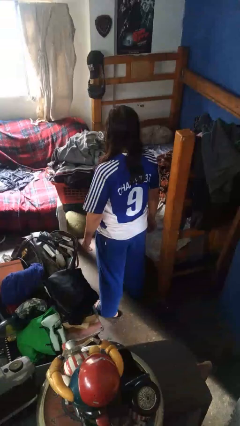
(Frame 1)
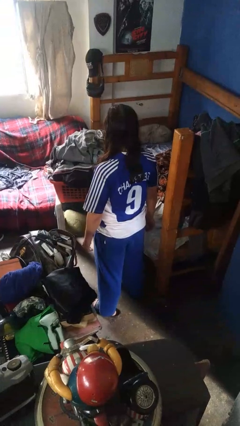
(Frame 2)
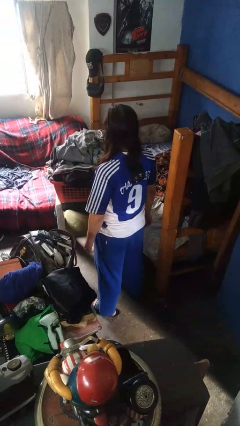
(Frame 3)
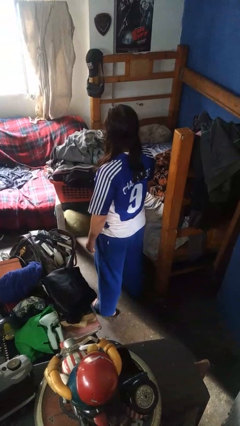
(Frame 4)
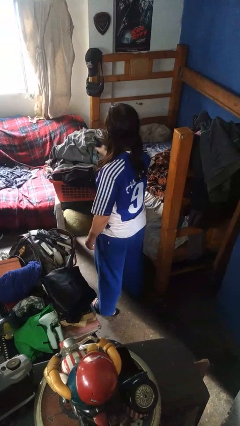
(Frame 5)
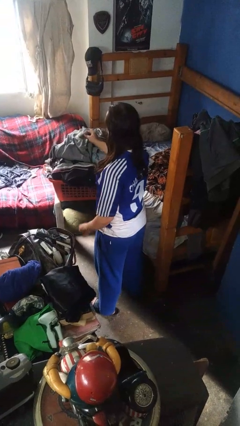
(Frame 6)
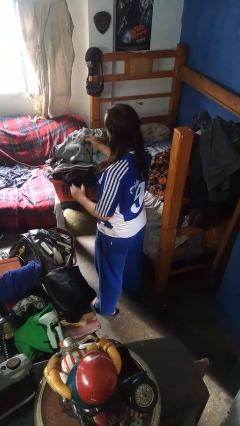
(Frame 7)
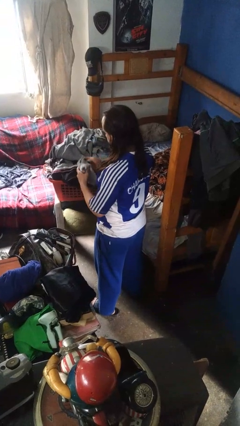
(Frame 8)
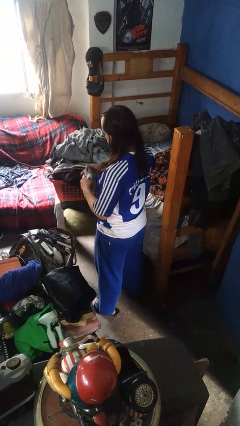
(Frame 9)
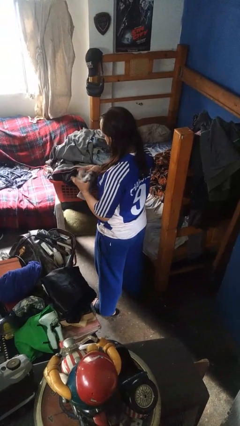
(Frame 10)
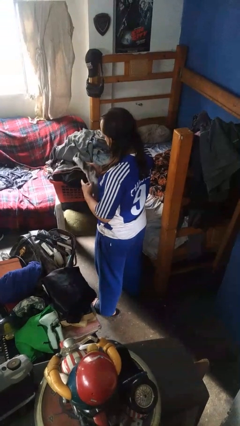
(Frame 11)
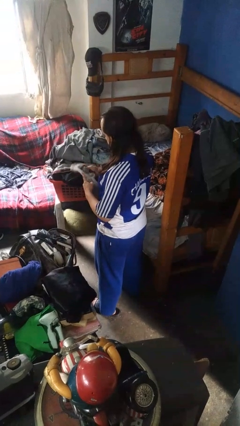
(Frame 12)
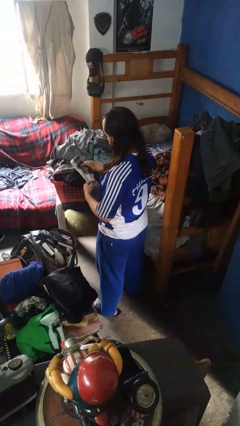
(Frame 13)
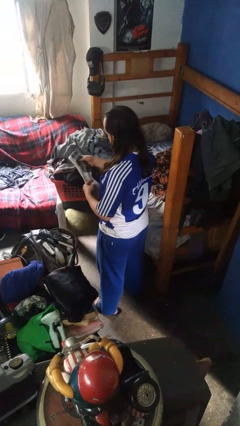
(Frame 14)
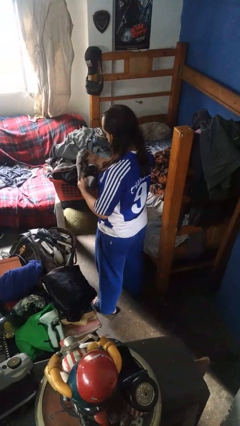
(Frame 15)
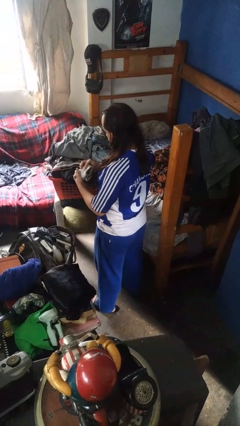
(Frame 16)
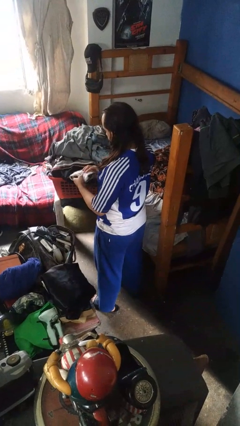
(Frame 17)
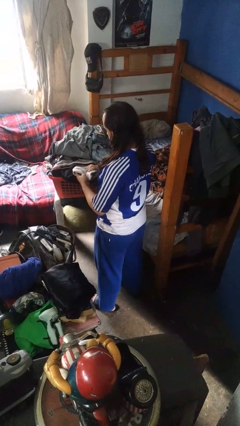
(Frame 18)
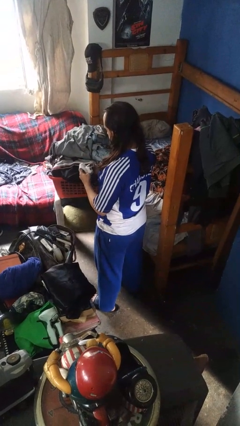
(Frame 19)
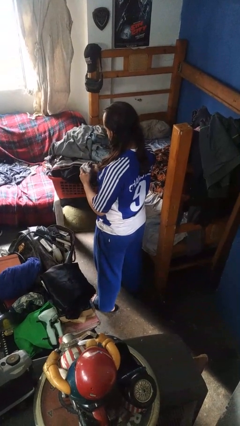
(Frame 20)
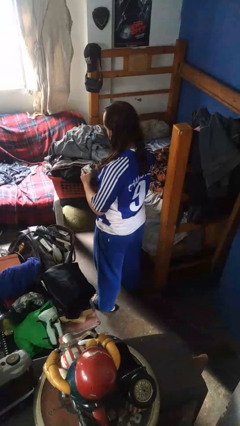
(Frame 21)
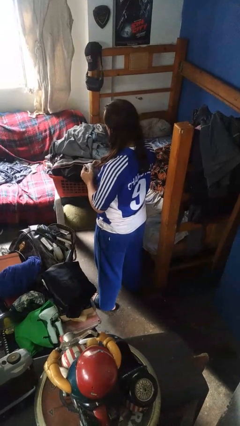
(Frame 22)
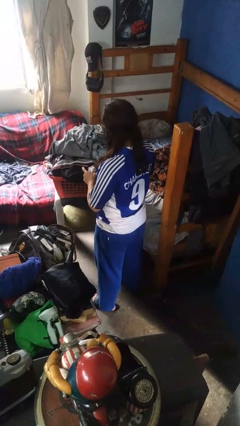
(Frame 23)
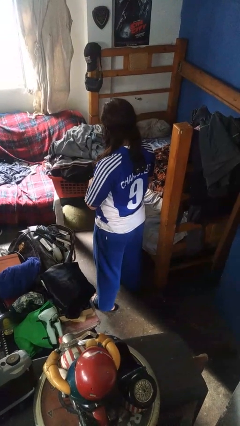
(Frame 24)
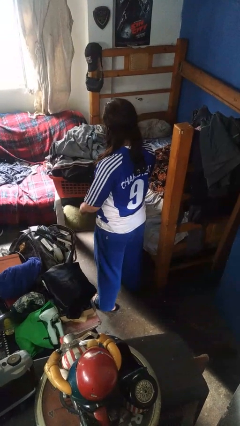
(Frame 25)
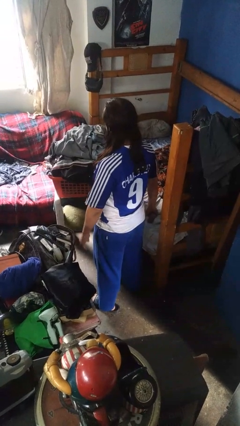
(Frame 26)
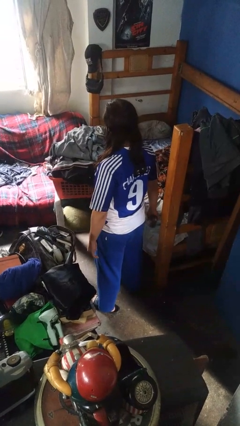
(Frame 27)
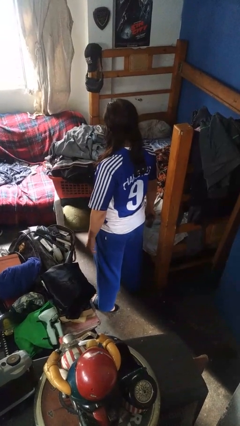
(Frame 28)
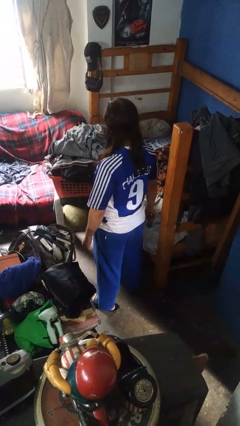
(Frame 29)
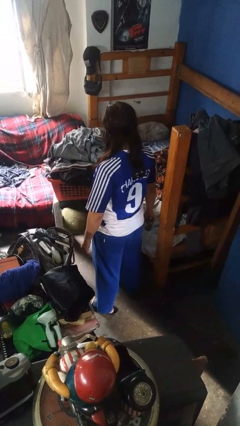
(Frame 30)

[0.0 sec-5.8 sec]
person folds socks

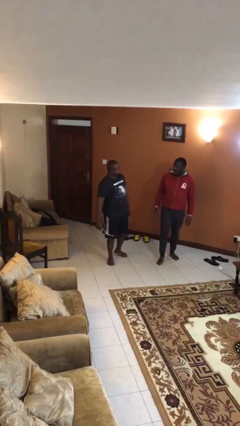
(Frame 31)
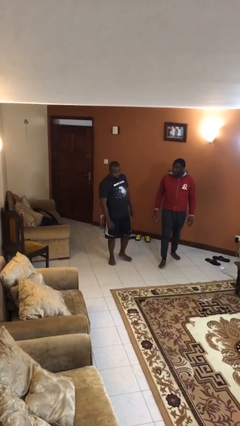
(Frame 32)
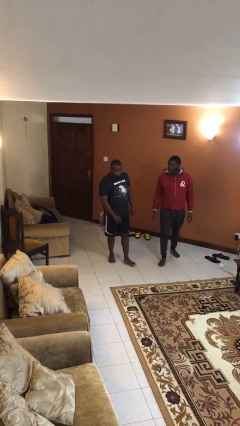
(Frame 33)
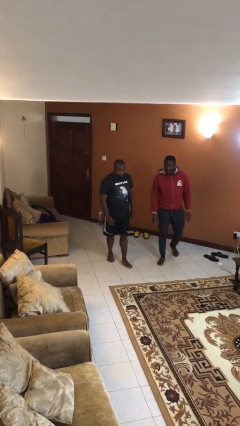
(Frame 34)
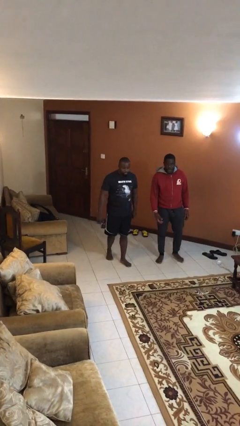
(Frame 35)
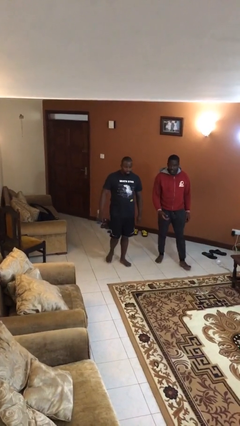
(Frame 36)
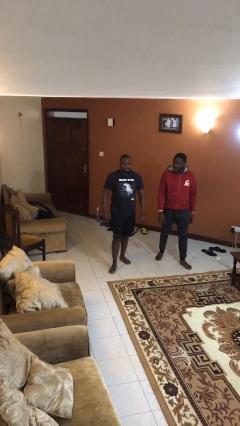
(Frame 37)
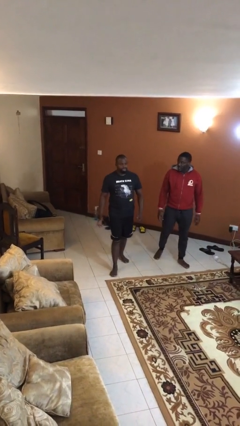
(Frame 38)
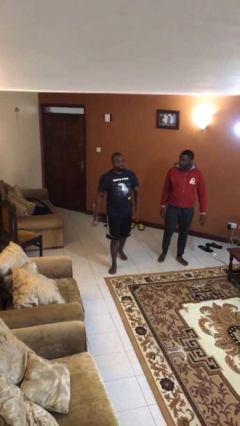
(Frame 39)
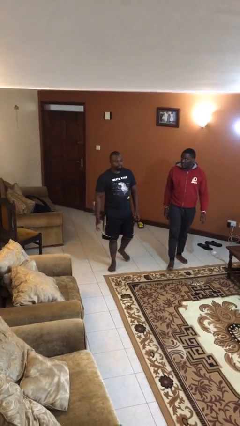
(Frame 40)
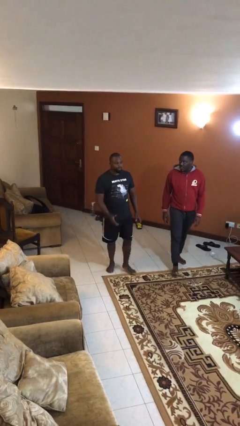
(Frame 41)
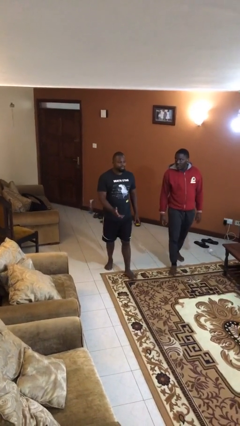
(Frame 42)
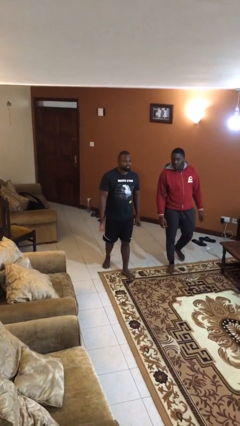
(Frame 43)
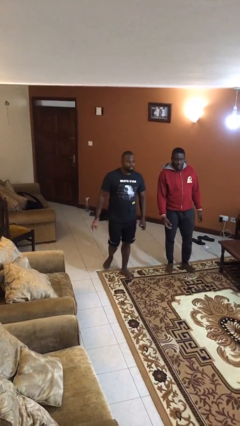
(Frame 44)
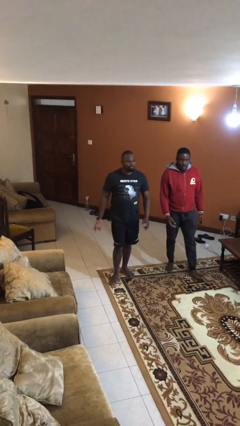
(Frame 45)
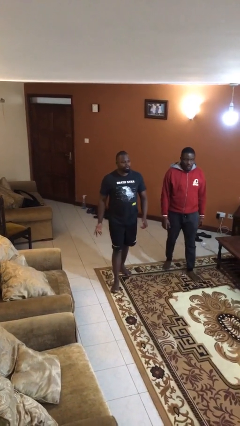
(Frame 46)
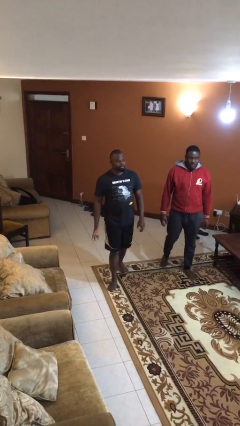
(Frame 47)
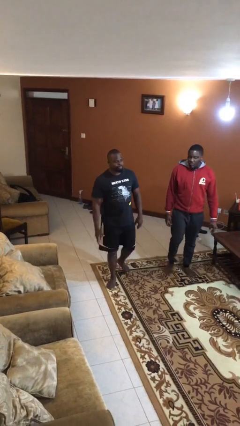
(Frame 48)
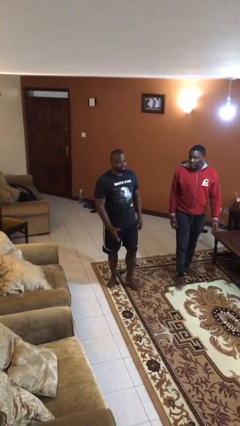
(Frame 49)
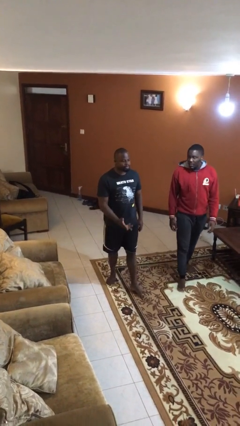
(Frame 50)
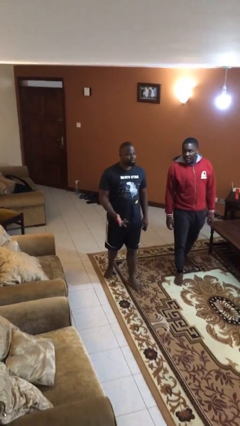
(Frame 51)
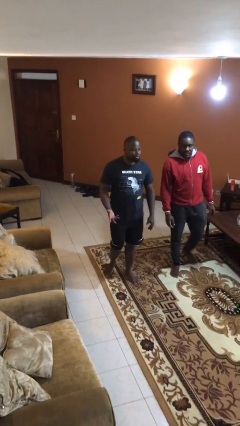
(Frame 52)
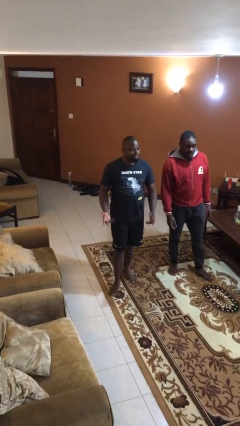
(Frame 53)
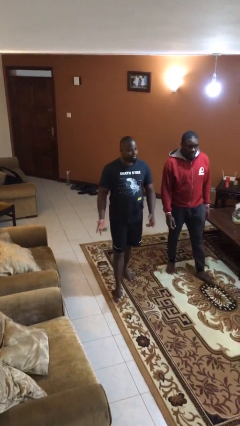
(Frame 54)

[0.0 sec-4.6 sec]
person talks to person

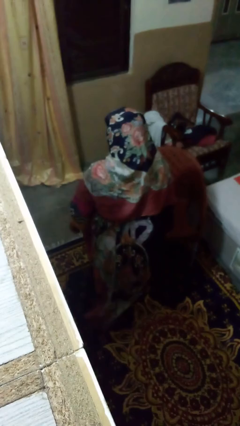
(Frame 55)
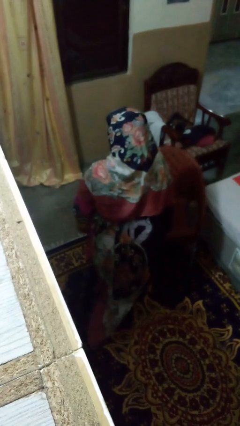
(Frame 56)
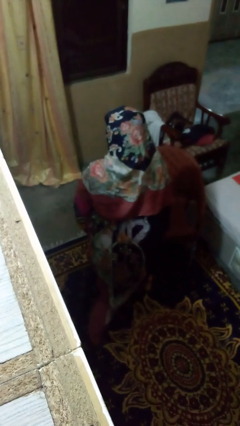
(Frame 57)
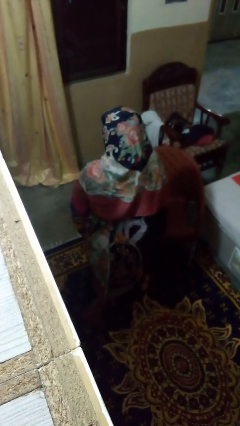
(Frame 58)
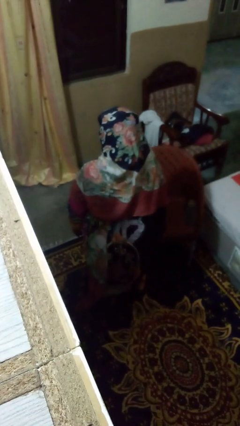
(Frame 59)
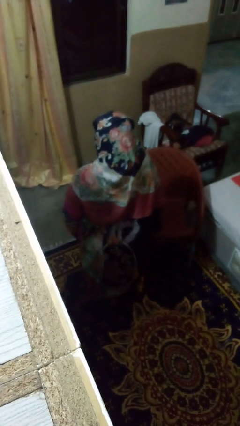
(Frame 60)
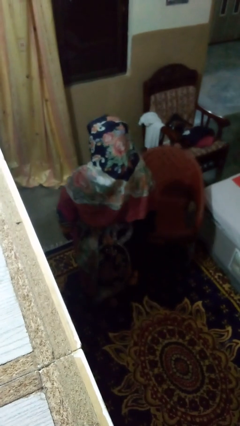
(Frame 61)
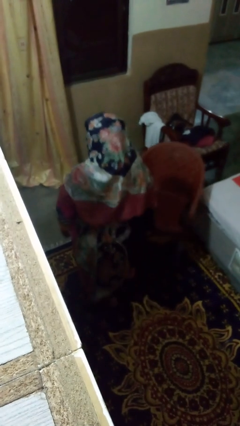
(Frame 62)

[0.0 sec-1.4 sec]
person trips on object on floor

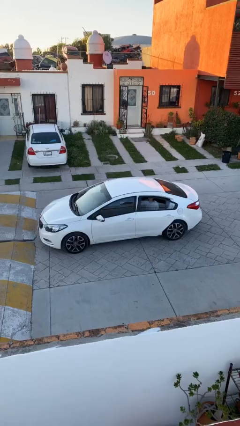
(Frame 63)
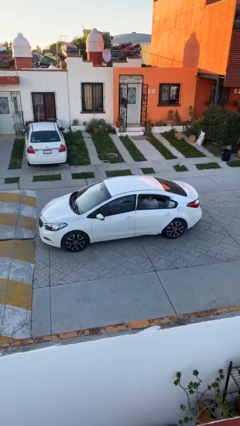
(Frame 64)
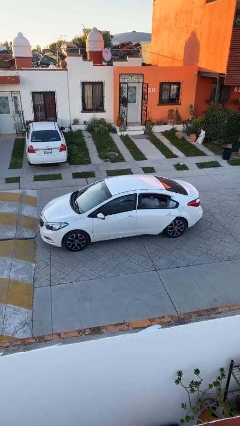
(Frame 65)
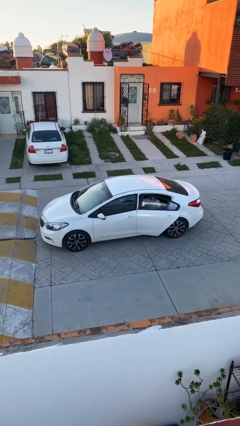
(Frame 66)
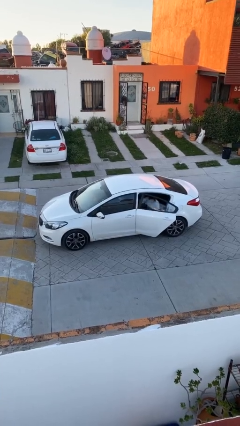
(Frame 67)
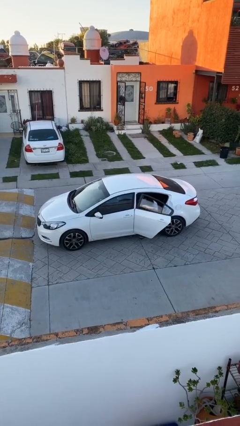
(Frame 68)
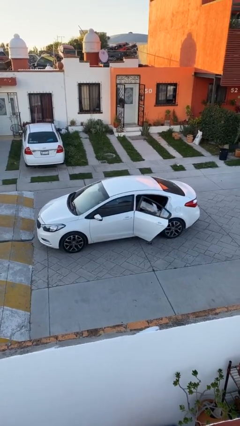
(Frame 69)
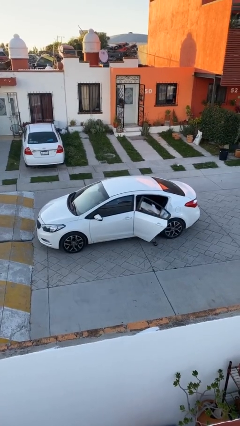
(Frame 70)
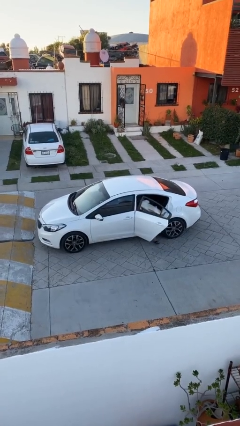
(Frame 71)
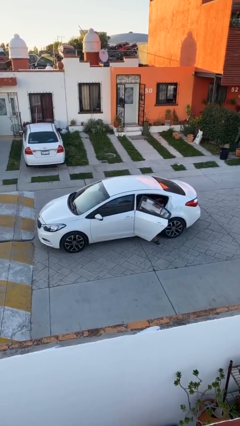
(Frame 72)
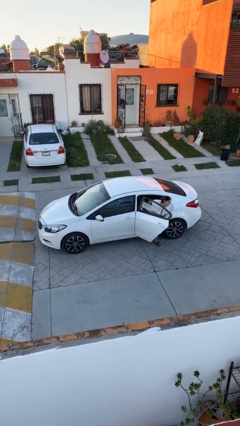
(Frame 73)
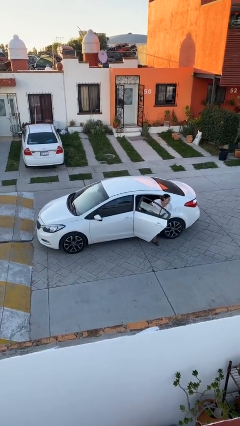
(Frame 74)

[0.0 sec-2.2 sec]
car drops off person

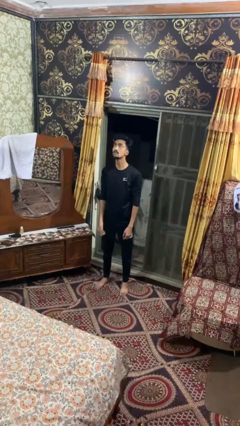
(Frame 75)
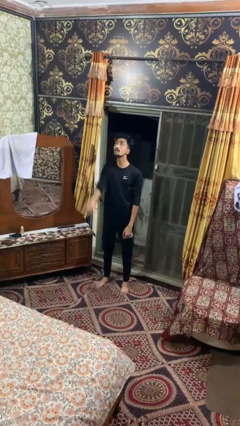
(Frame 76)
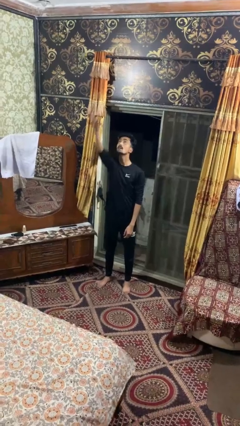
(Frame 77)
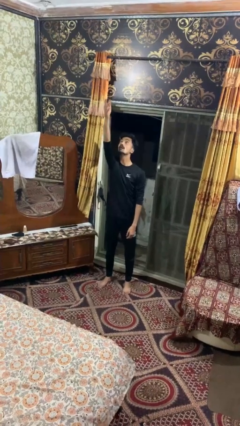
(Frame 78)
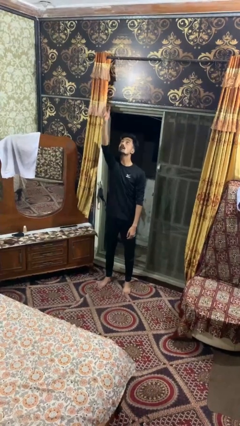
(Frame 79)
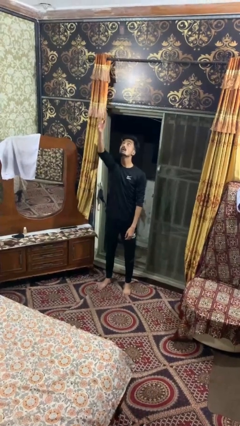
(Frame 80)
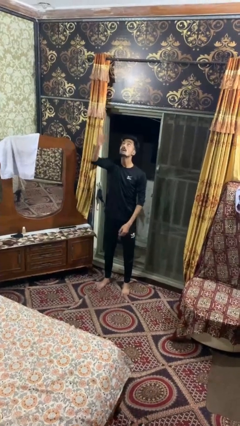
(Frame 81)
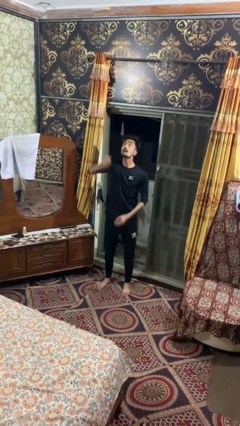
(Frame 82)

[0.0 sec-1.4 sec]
person drops object

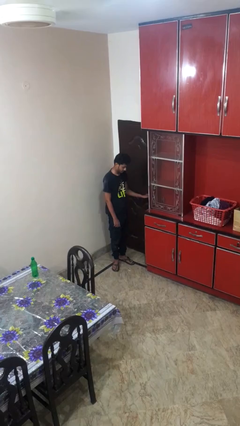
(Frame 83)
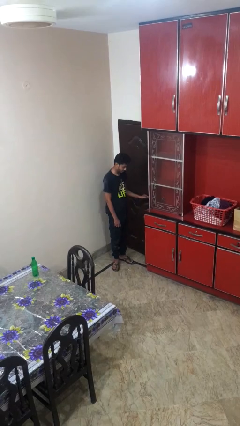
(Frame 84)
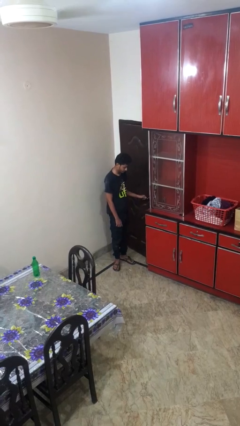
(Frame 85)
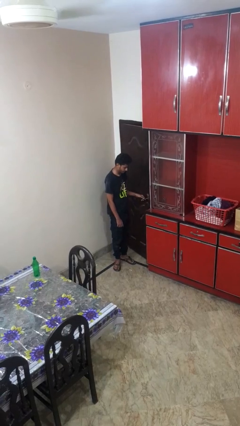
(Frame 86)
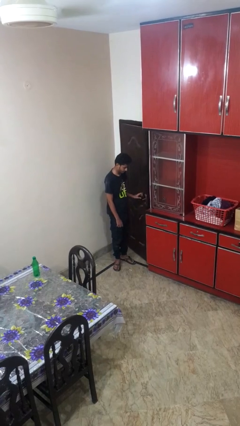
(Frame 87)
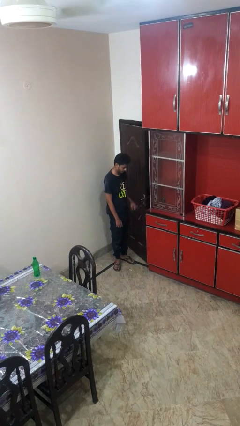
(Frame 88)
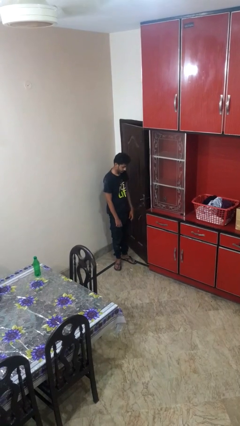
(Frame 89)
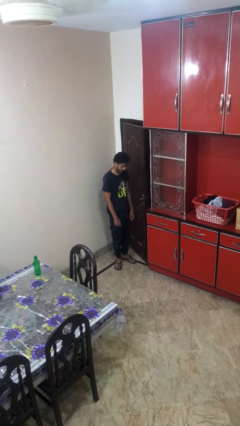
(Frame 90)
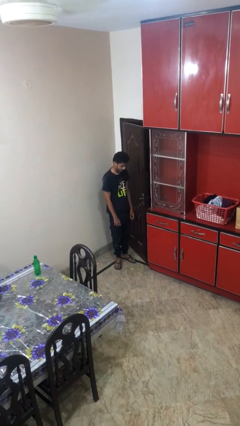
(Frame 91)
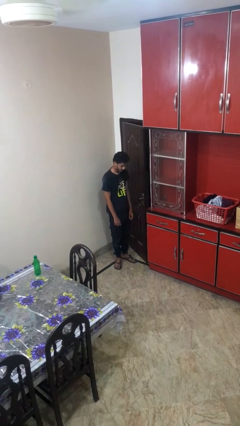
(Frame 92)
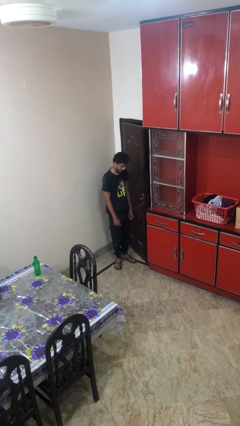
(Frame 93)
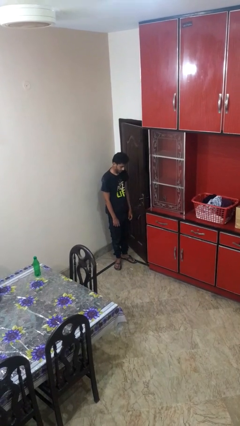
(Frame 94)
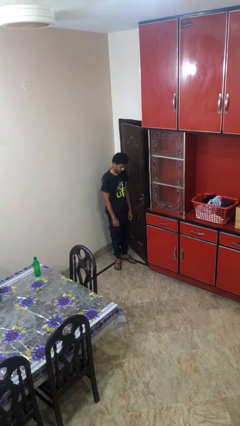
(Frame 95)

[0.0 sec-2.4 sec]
person opens facility door
